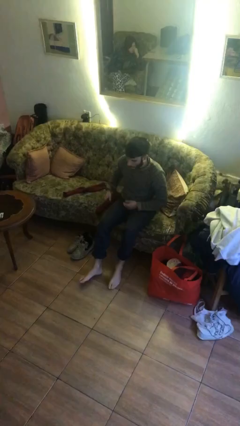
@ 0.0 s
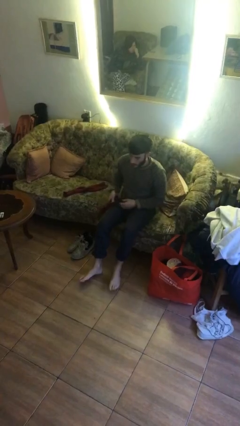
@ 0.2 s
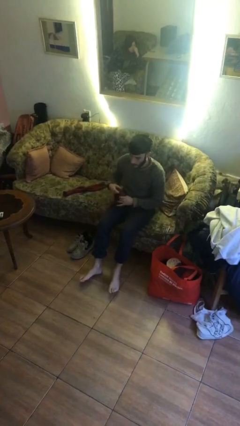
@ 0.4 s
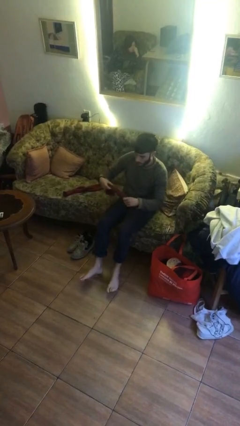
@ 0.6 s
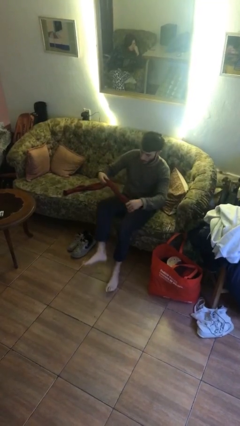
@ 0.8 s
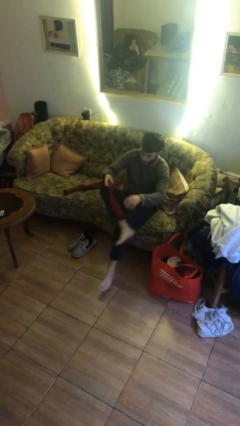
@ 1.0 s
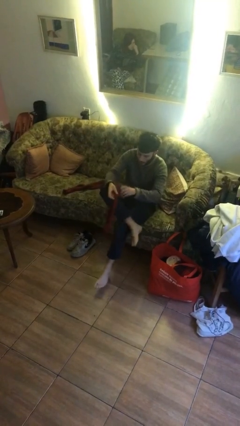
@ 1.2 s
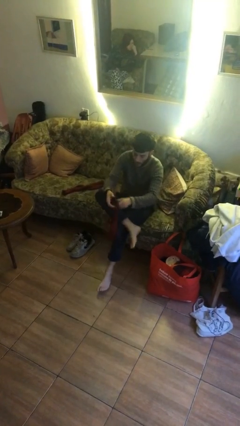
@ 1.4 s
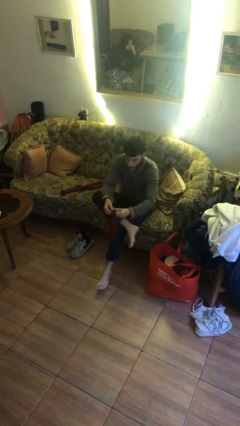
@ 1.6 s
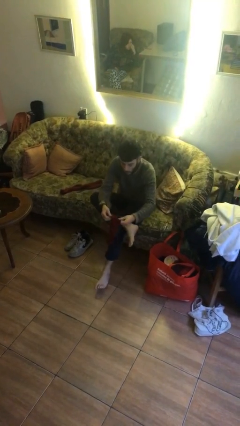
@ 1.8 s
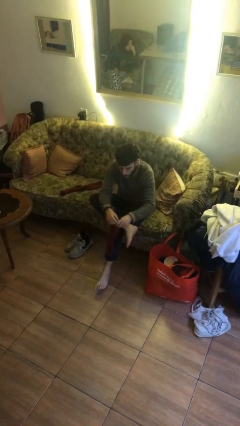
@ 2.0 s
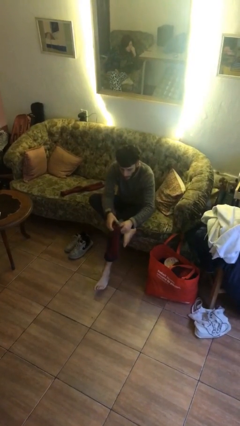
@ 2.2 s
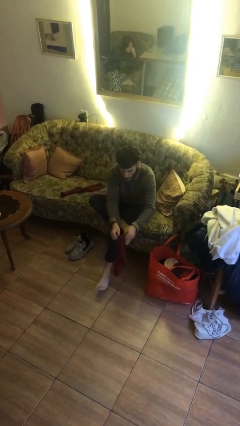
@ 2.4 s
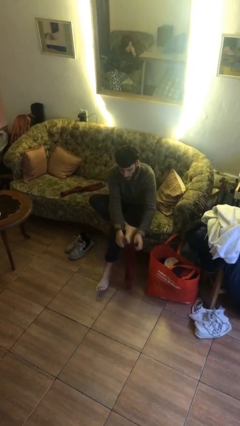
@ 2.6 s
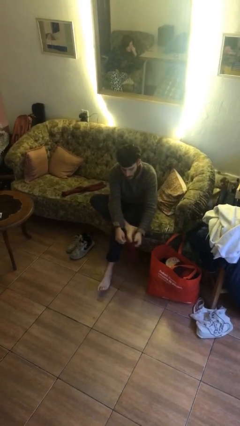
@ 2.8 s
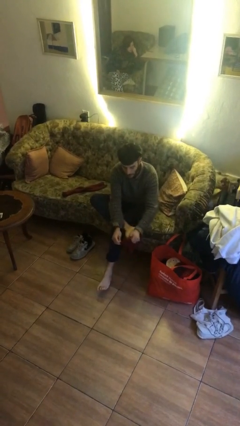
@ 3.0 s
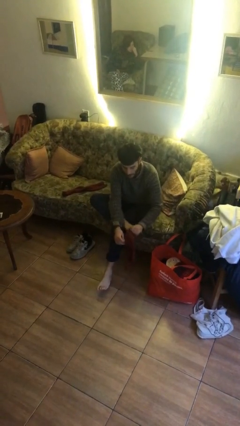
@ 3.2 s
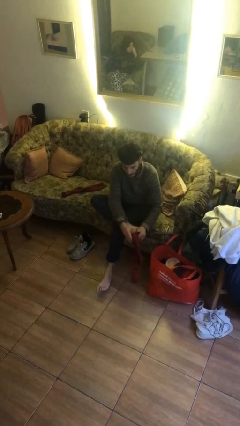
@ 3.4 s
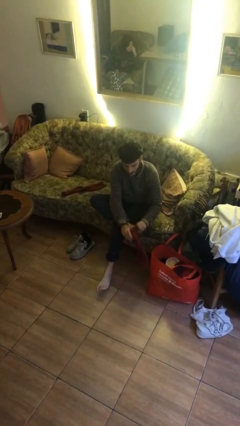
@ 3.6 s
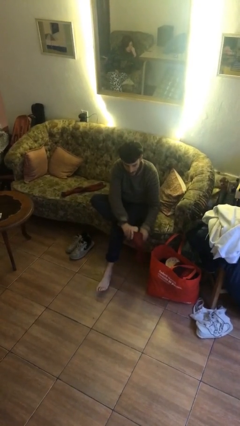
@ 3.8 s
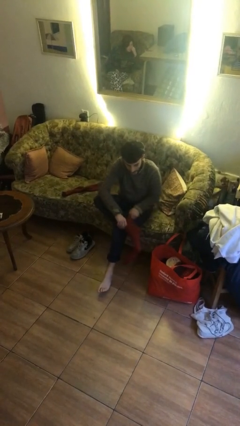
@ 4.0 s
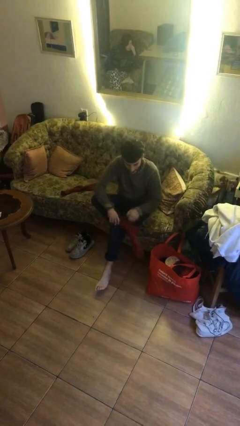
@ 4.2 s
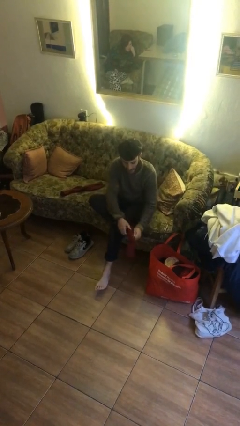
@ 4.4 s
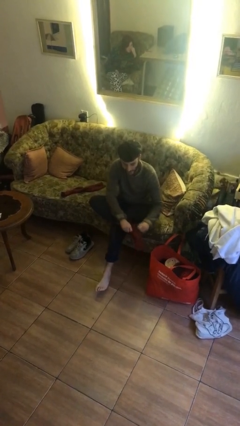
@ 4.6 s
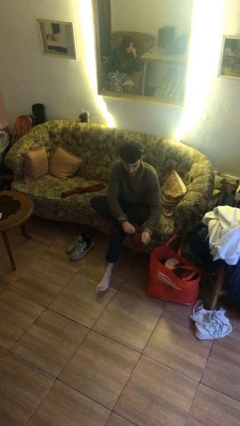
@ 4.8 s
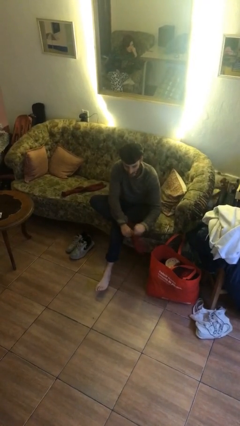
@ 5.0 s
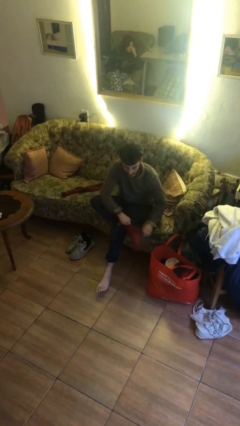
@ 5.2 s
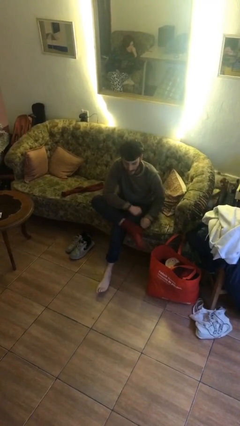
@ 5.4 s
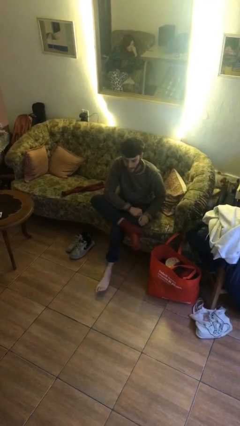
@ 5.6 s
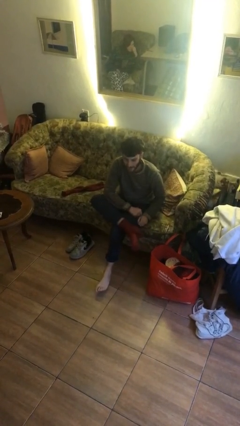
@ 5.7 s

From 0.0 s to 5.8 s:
person puts on socks

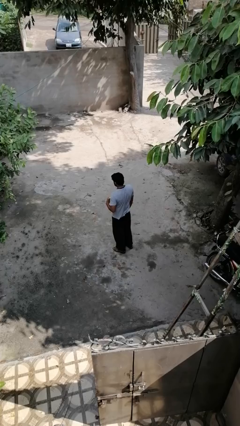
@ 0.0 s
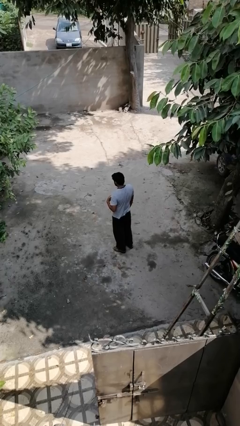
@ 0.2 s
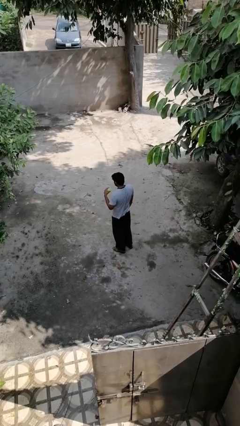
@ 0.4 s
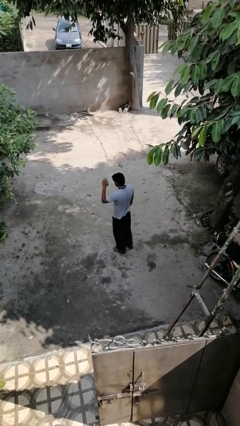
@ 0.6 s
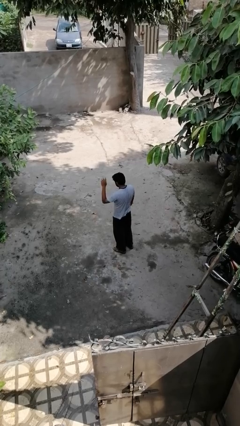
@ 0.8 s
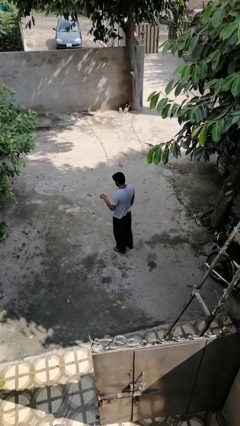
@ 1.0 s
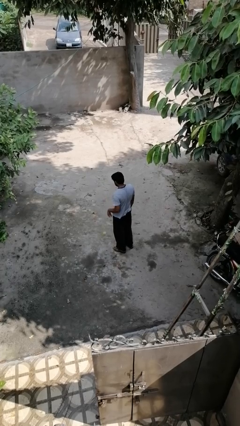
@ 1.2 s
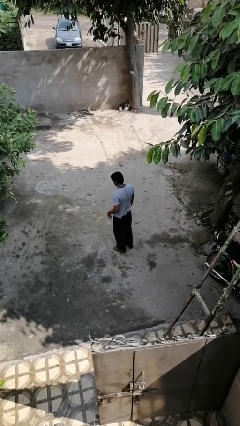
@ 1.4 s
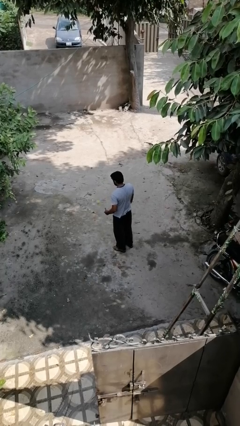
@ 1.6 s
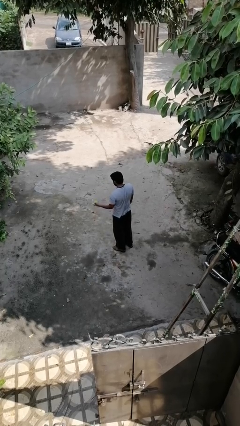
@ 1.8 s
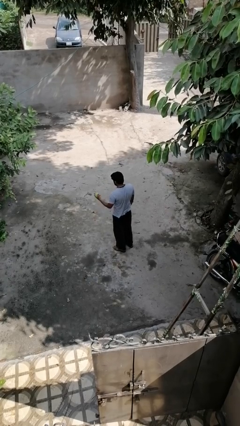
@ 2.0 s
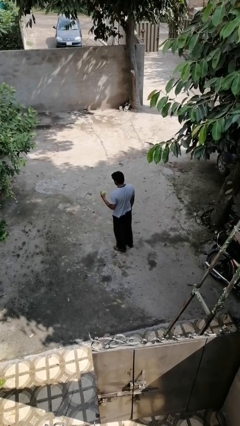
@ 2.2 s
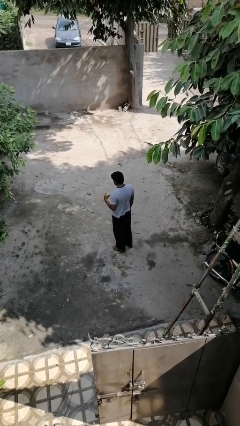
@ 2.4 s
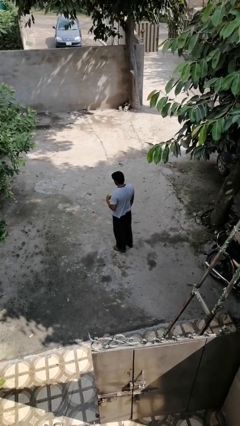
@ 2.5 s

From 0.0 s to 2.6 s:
person bounces ball on floor

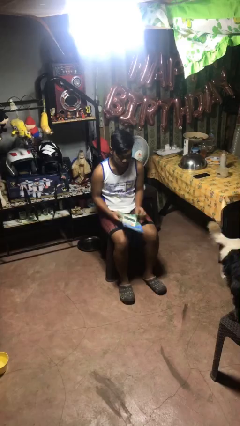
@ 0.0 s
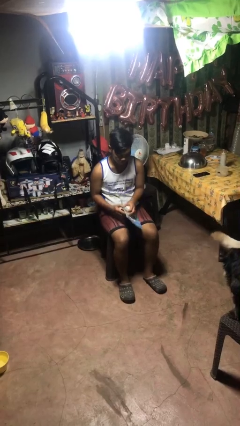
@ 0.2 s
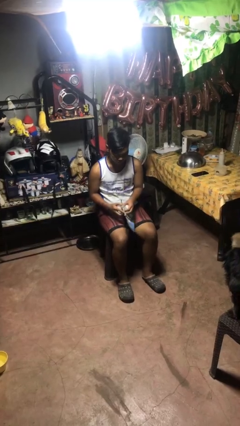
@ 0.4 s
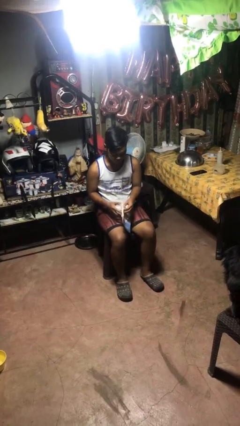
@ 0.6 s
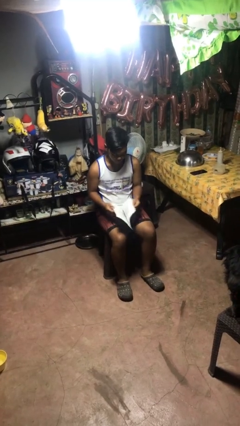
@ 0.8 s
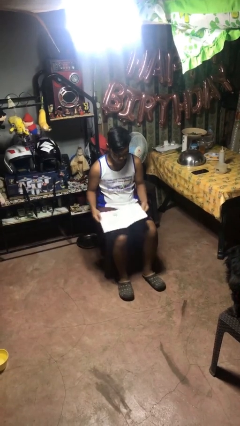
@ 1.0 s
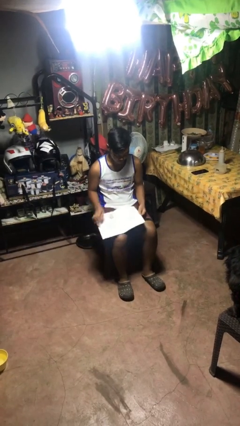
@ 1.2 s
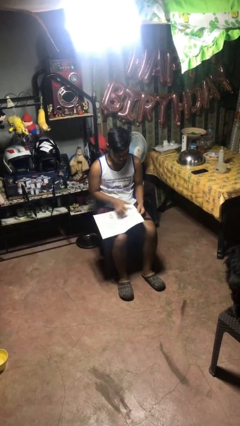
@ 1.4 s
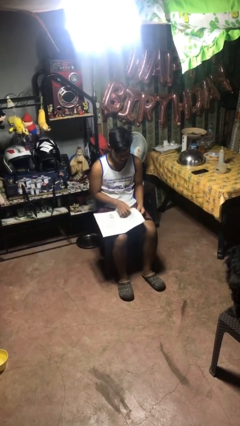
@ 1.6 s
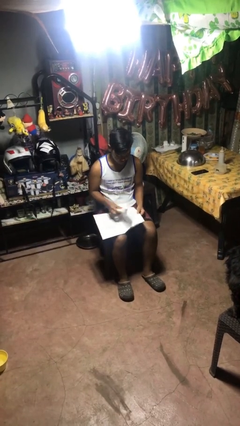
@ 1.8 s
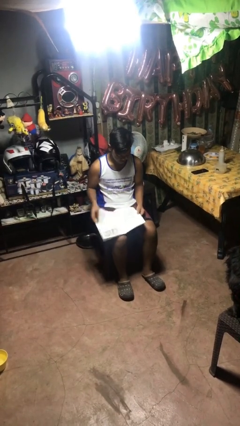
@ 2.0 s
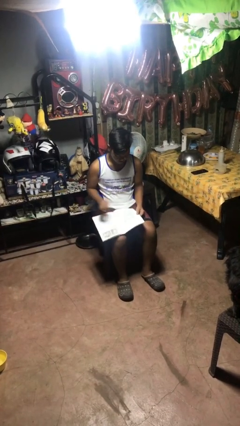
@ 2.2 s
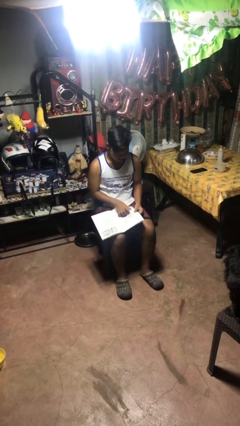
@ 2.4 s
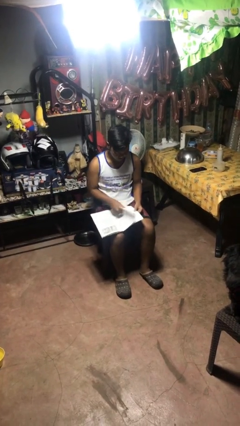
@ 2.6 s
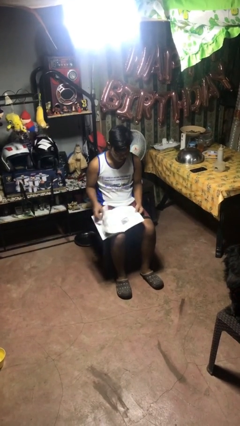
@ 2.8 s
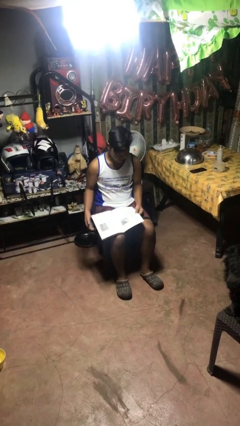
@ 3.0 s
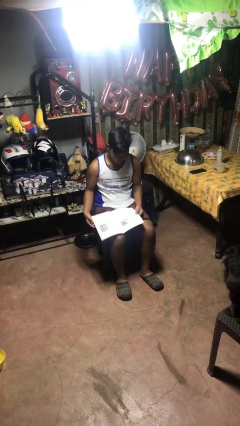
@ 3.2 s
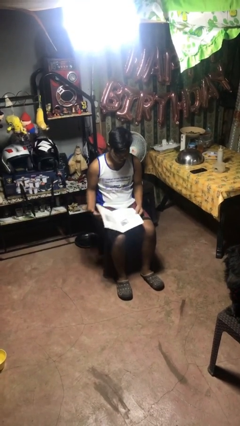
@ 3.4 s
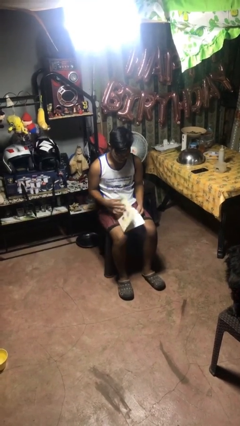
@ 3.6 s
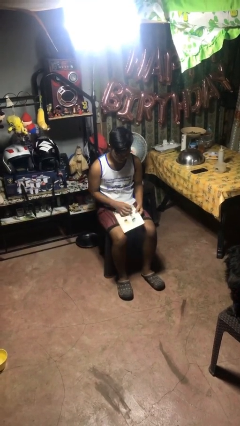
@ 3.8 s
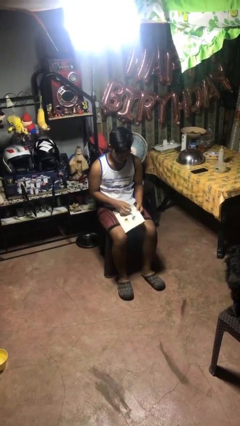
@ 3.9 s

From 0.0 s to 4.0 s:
person reads magazine

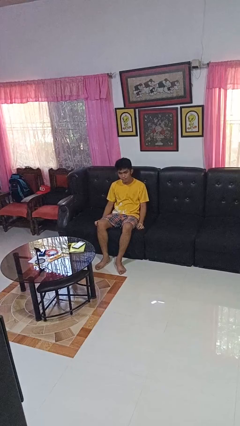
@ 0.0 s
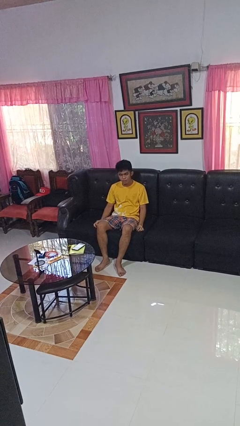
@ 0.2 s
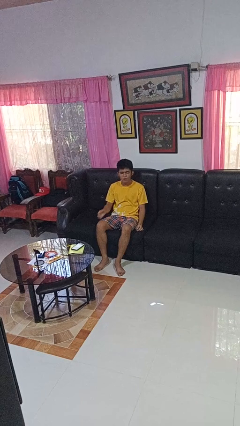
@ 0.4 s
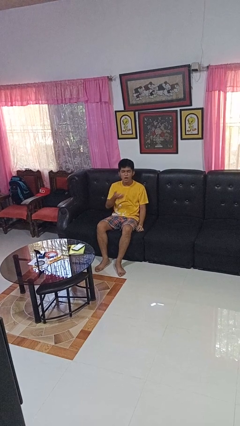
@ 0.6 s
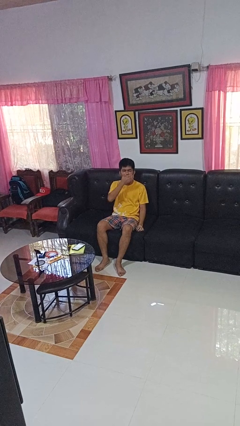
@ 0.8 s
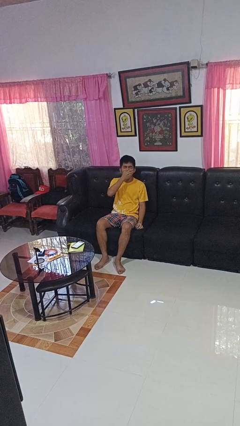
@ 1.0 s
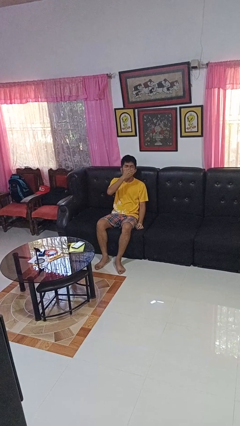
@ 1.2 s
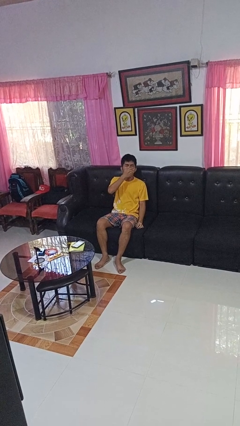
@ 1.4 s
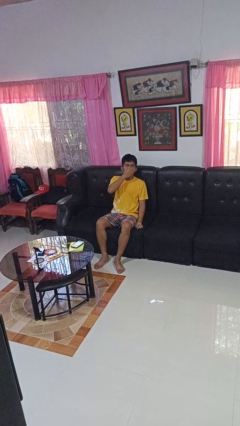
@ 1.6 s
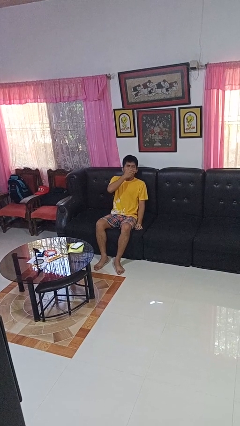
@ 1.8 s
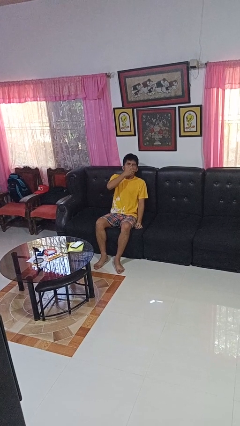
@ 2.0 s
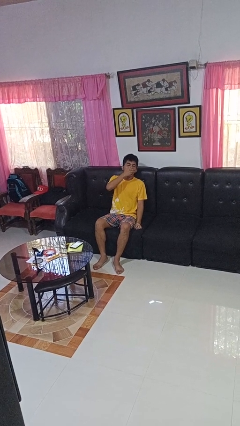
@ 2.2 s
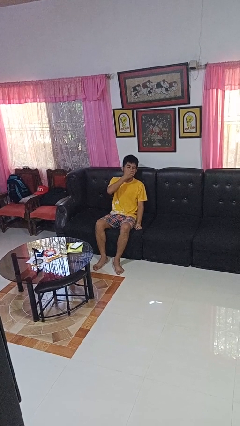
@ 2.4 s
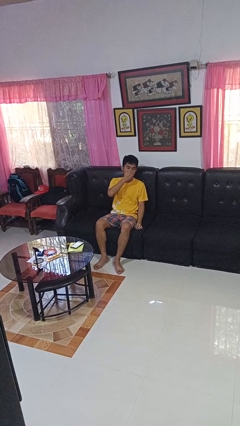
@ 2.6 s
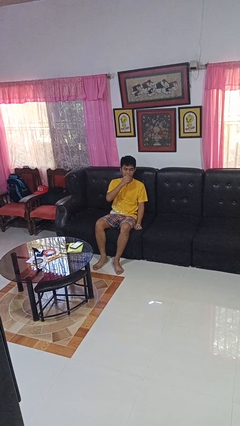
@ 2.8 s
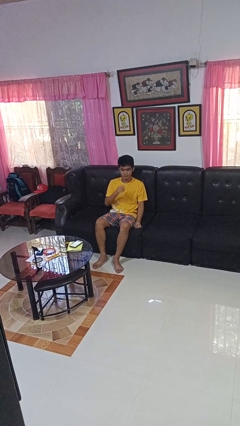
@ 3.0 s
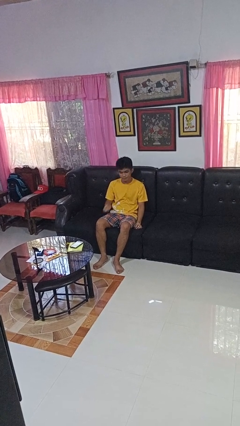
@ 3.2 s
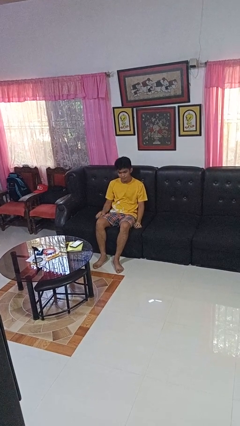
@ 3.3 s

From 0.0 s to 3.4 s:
person yawns

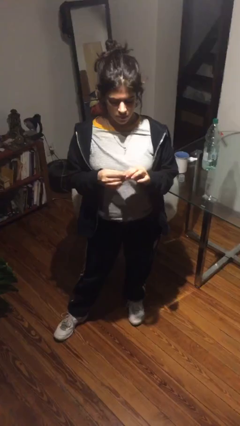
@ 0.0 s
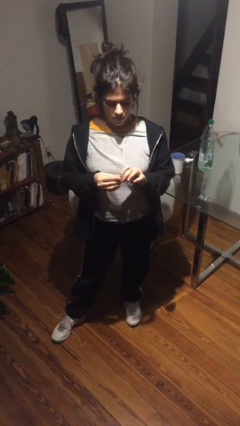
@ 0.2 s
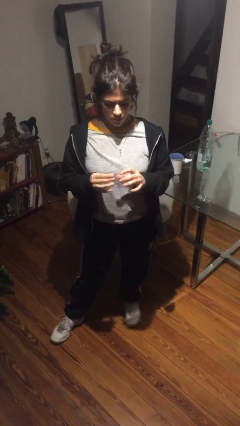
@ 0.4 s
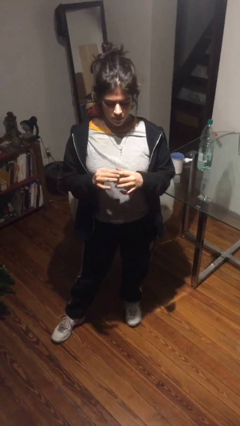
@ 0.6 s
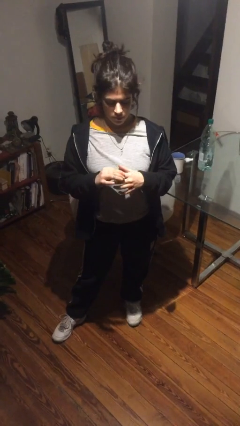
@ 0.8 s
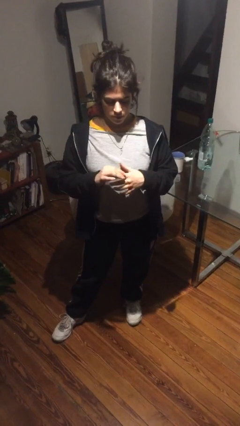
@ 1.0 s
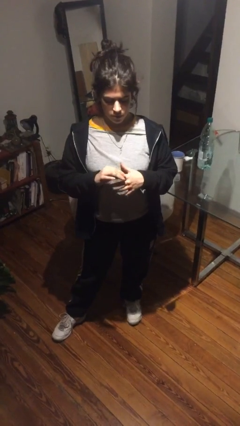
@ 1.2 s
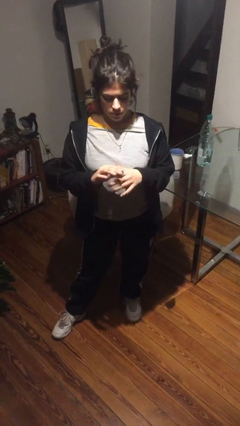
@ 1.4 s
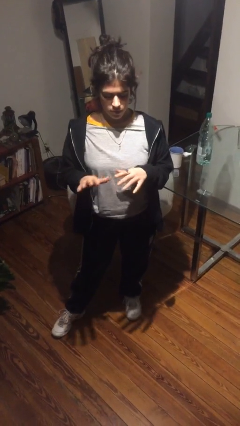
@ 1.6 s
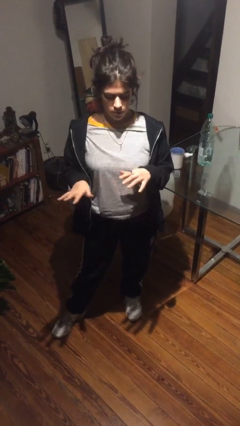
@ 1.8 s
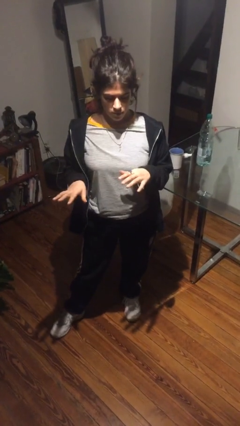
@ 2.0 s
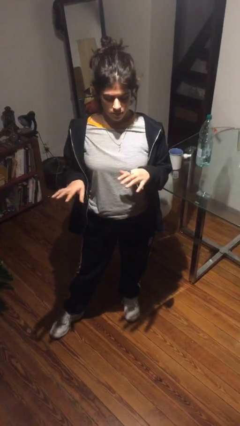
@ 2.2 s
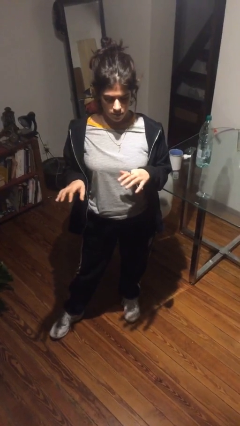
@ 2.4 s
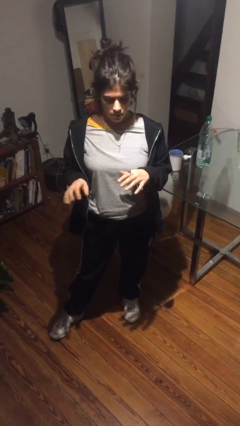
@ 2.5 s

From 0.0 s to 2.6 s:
person puts on ring
